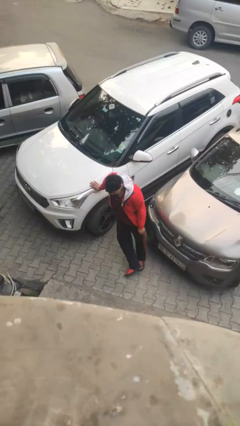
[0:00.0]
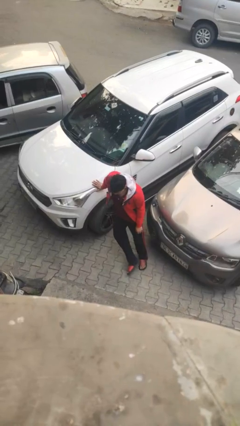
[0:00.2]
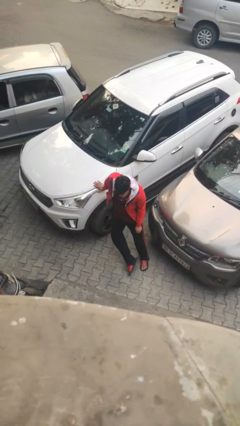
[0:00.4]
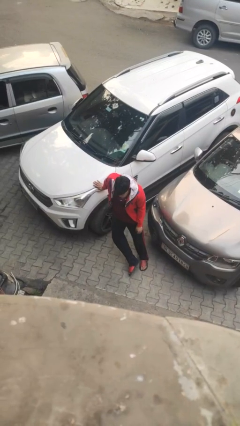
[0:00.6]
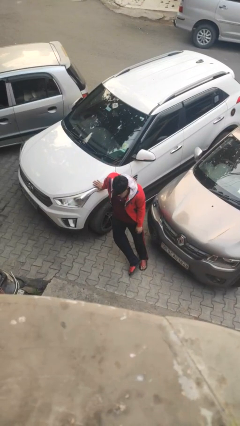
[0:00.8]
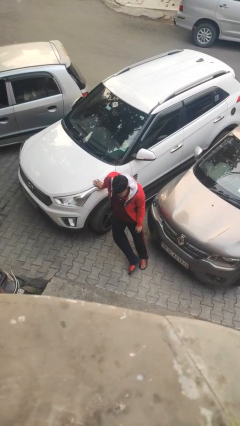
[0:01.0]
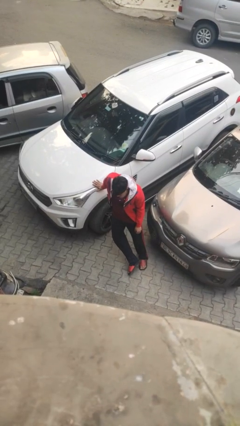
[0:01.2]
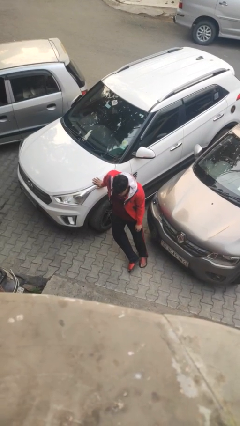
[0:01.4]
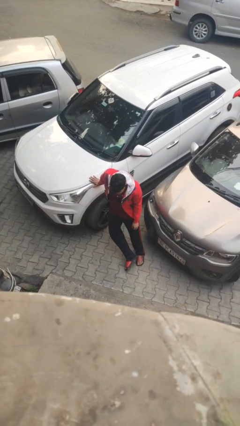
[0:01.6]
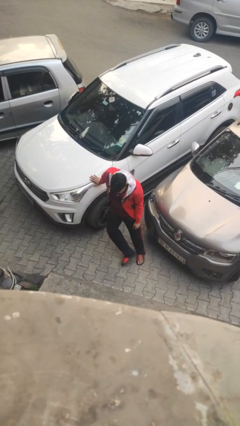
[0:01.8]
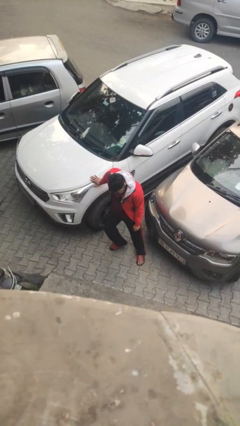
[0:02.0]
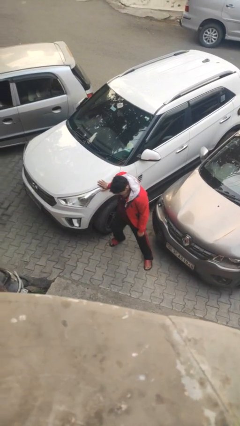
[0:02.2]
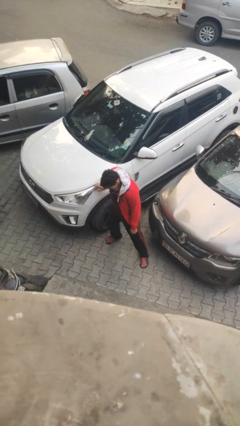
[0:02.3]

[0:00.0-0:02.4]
person leans against car

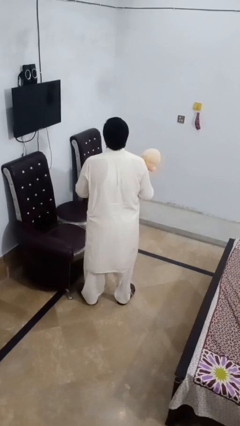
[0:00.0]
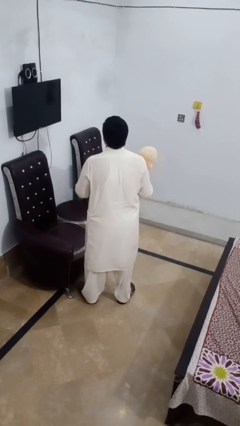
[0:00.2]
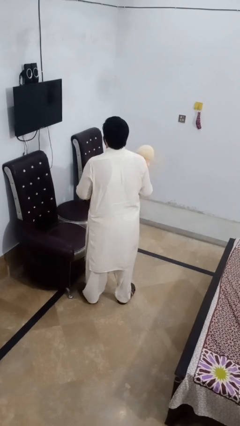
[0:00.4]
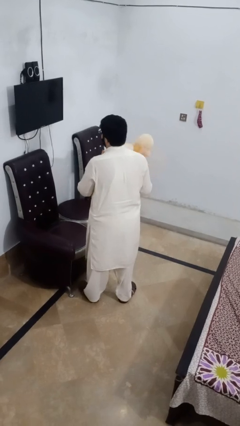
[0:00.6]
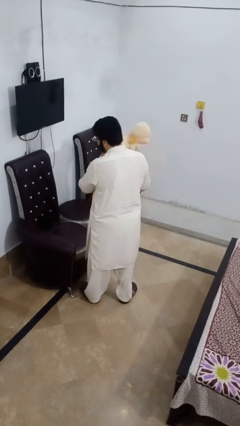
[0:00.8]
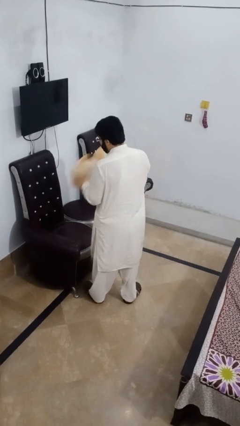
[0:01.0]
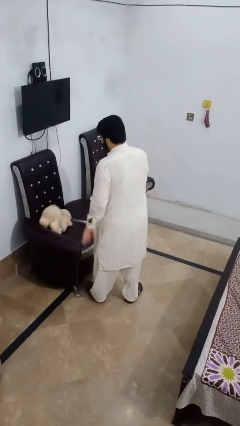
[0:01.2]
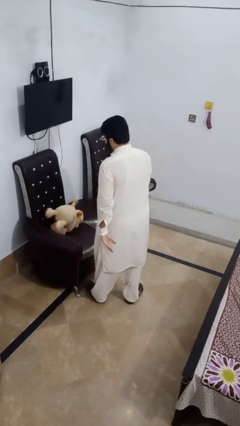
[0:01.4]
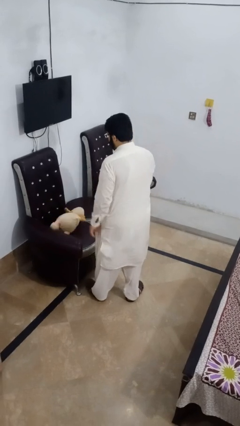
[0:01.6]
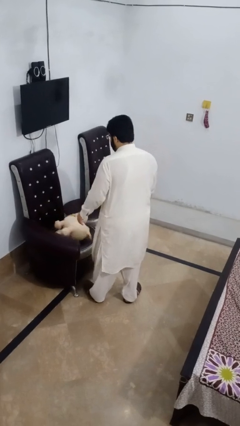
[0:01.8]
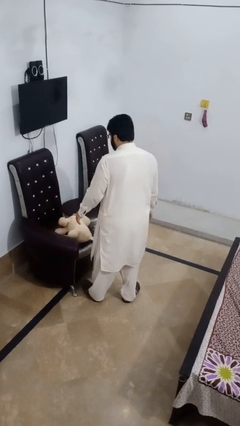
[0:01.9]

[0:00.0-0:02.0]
person puts down object on couch

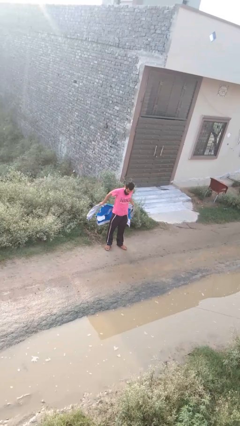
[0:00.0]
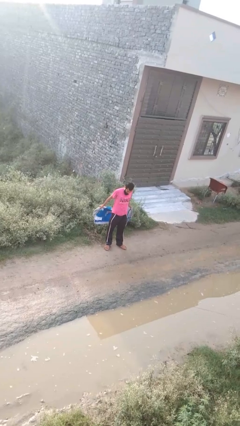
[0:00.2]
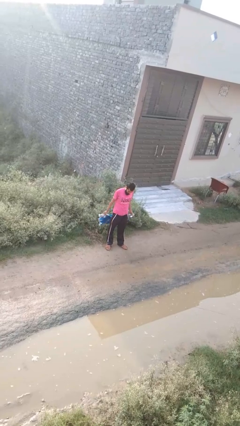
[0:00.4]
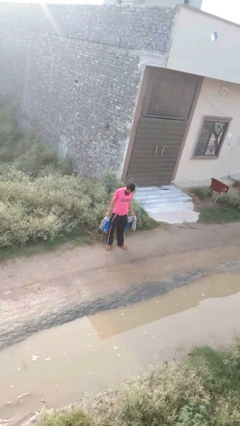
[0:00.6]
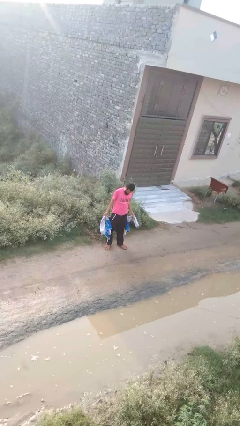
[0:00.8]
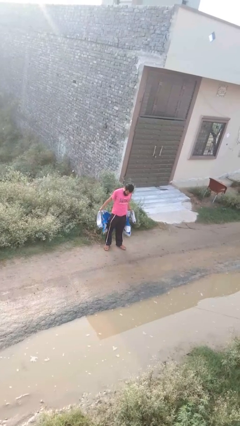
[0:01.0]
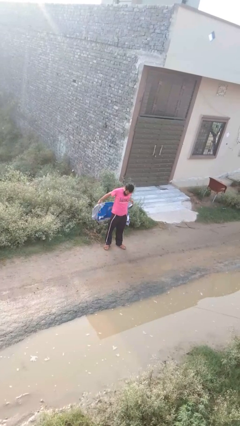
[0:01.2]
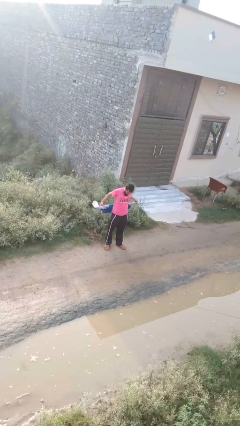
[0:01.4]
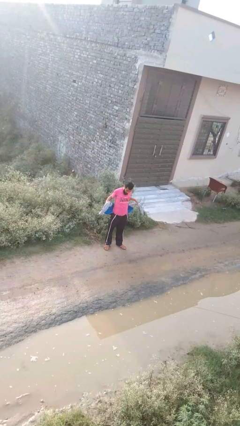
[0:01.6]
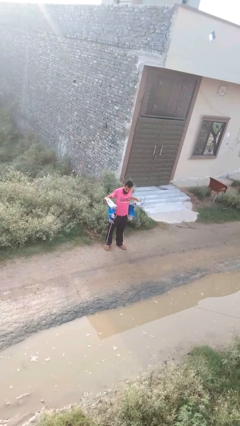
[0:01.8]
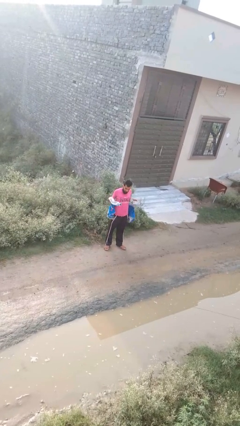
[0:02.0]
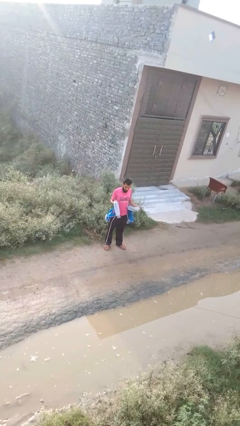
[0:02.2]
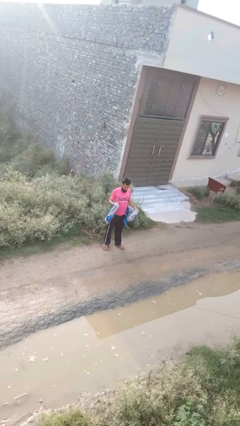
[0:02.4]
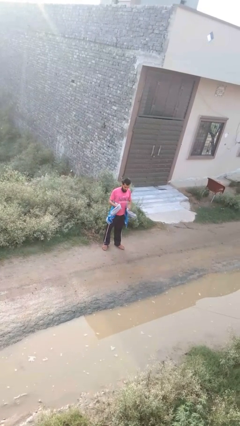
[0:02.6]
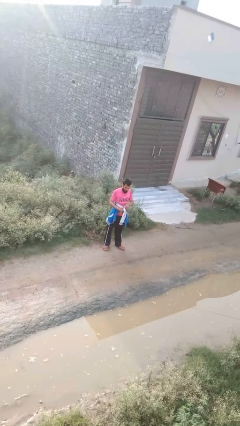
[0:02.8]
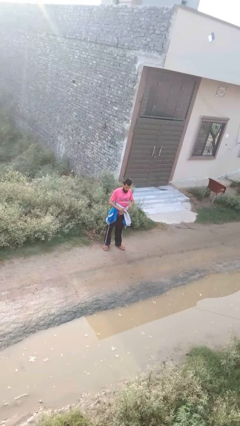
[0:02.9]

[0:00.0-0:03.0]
person ties jacket around waist

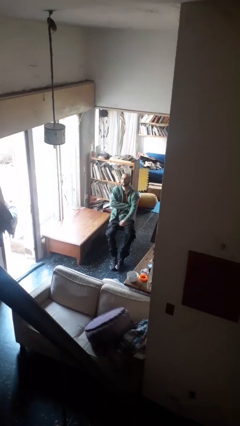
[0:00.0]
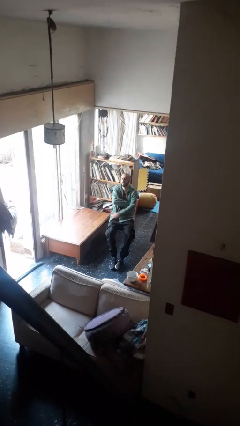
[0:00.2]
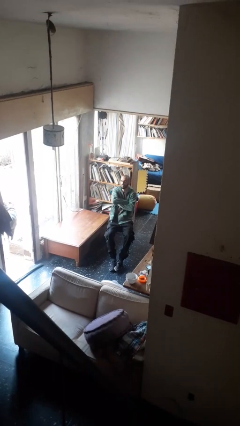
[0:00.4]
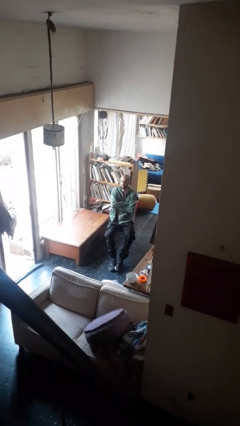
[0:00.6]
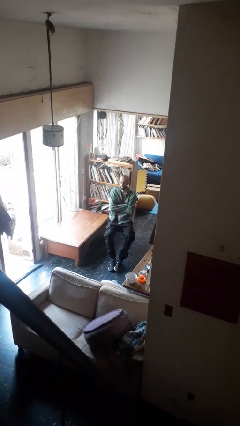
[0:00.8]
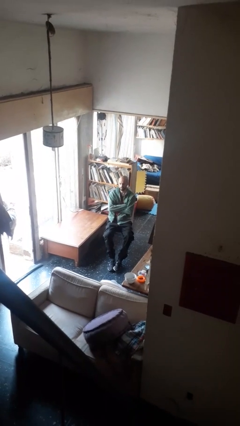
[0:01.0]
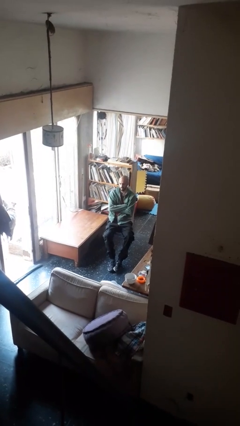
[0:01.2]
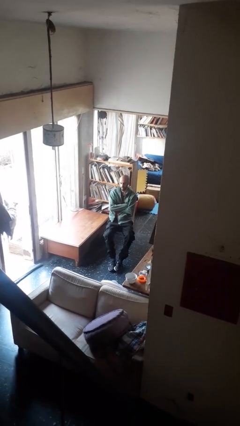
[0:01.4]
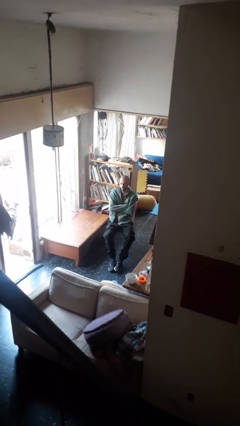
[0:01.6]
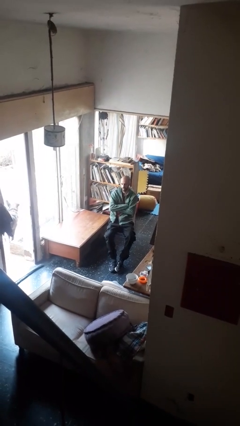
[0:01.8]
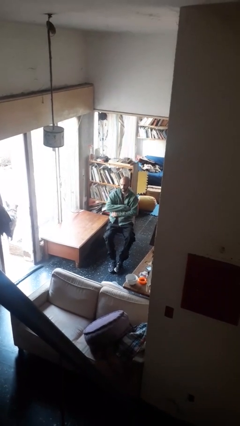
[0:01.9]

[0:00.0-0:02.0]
person crosses arms

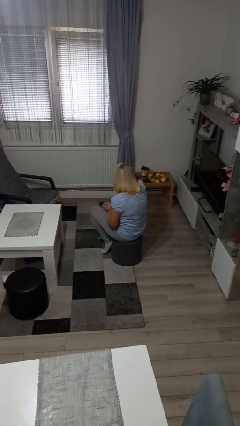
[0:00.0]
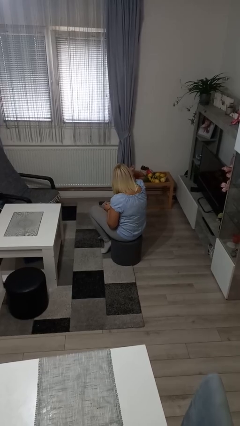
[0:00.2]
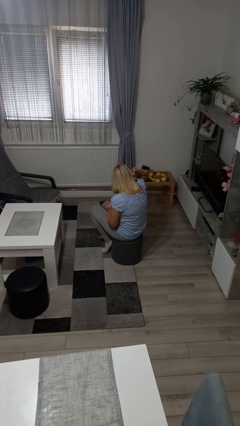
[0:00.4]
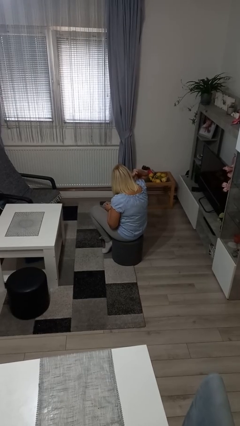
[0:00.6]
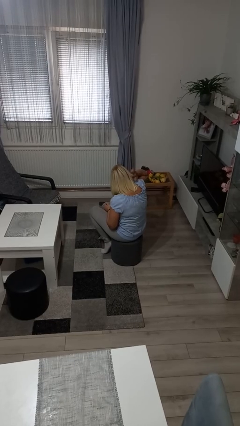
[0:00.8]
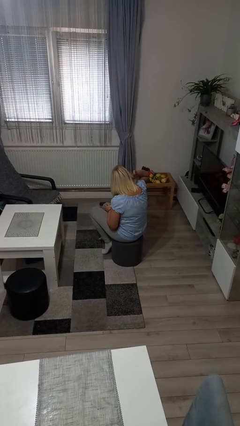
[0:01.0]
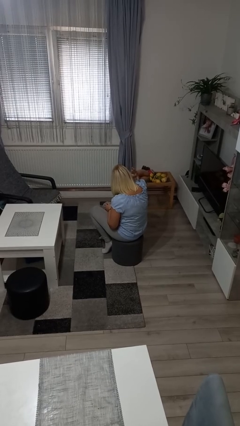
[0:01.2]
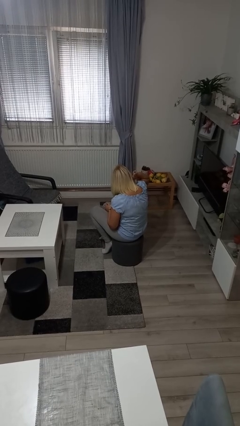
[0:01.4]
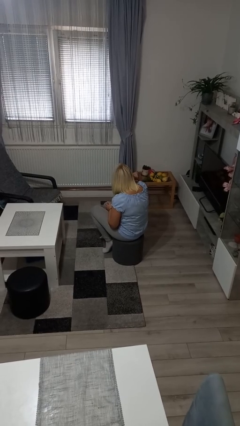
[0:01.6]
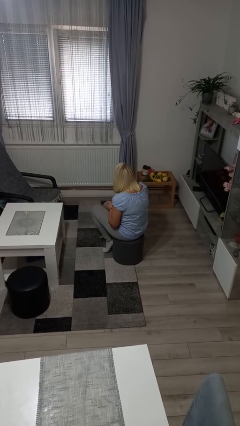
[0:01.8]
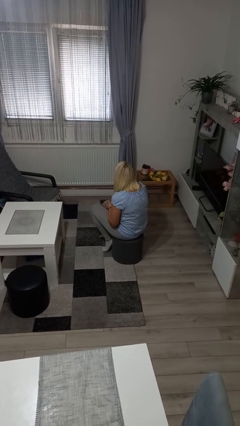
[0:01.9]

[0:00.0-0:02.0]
person touches earlobe

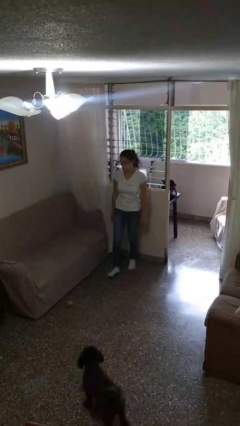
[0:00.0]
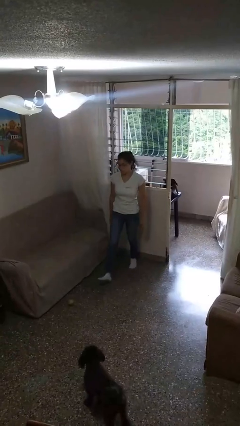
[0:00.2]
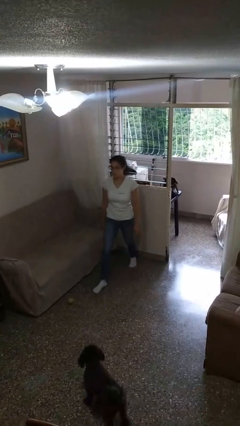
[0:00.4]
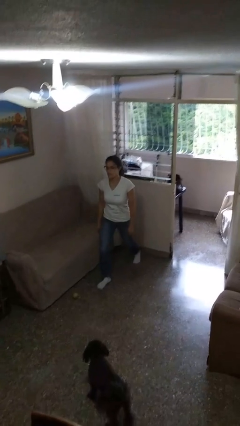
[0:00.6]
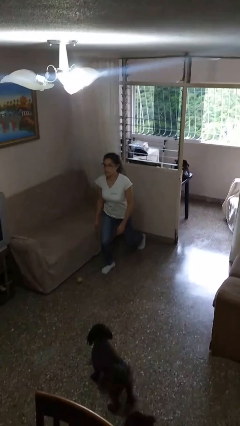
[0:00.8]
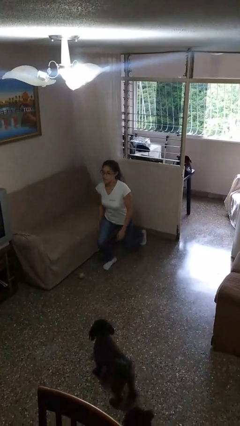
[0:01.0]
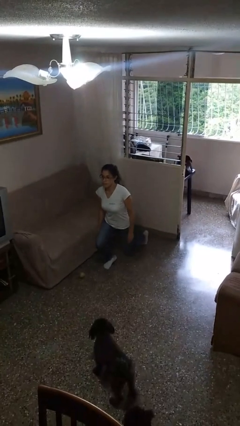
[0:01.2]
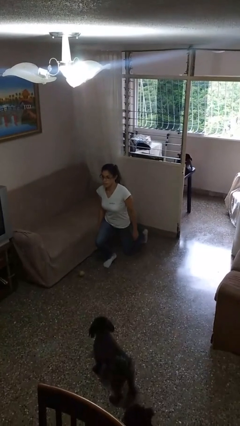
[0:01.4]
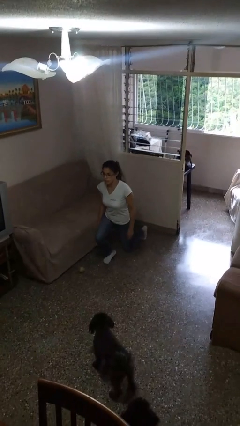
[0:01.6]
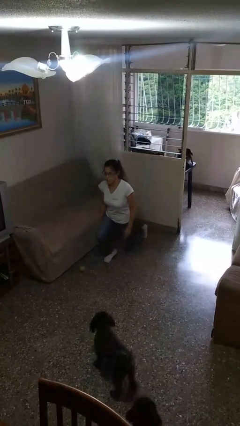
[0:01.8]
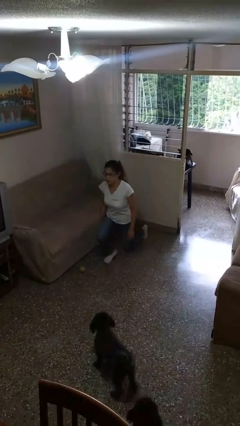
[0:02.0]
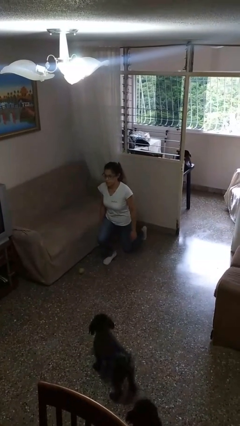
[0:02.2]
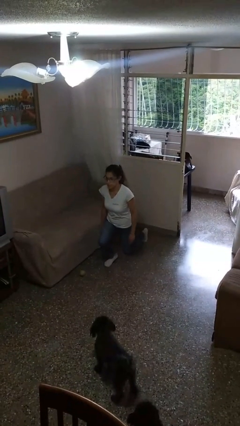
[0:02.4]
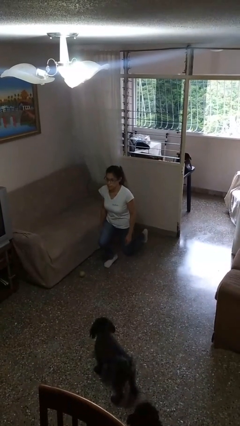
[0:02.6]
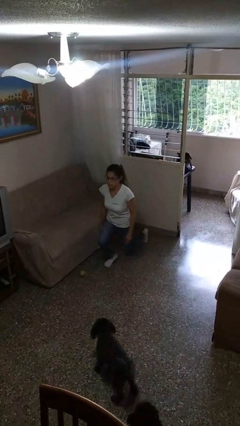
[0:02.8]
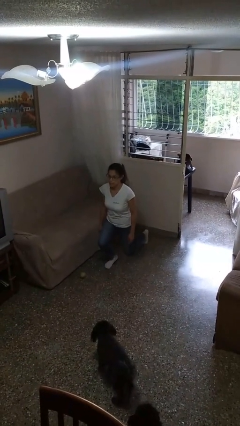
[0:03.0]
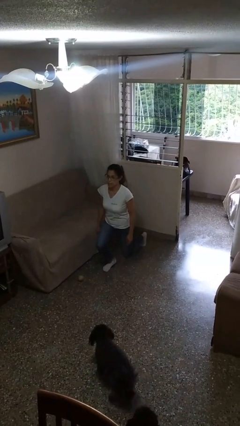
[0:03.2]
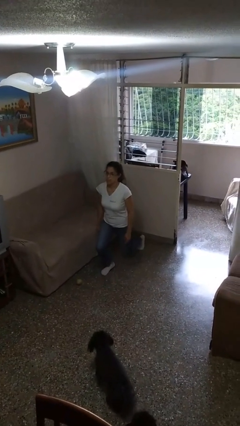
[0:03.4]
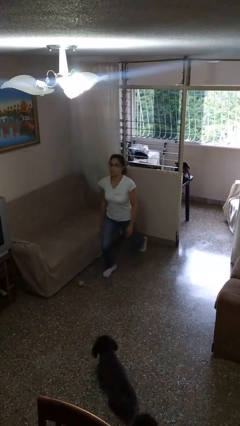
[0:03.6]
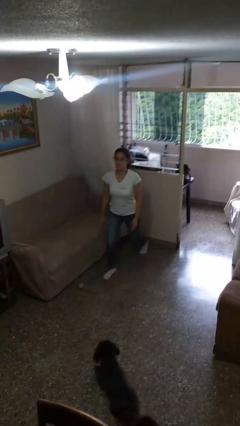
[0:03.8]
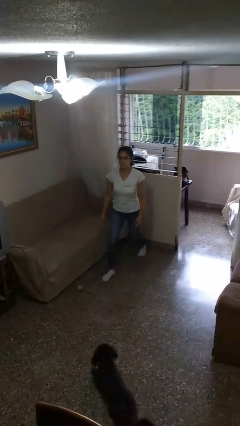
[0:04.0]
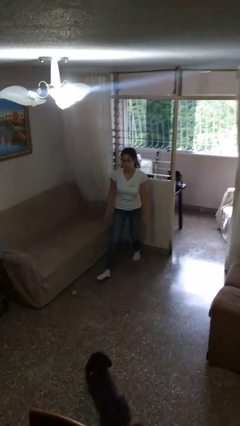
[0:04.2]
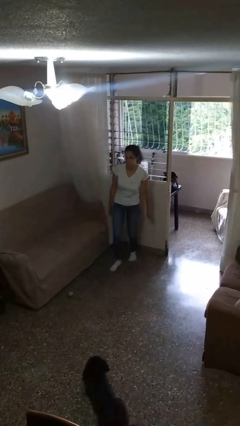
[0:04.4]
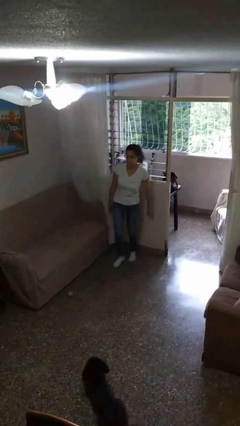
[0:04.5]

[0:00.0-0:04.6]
person exercises with lunges

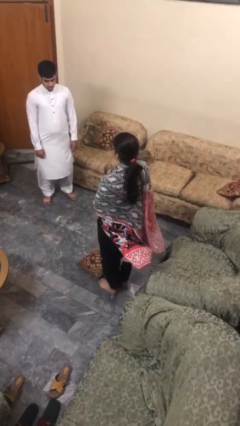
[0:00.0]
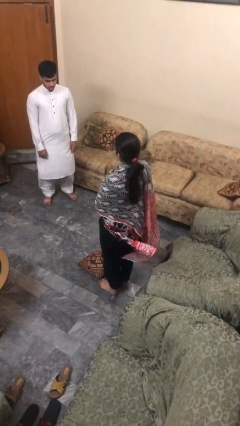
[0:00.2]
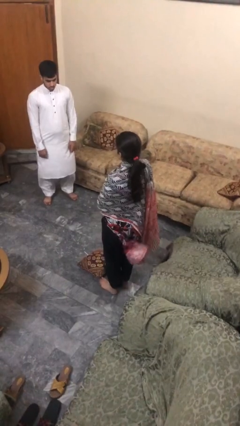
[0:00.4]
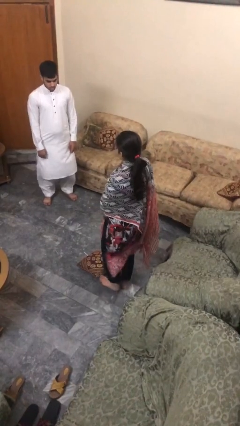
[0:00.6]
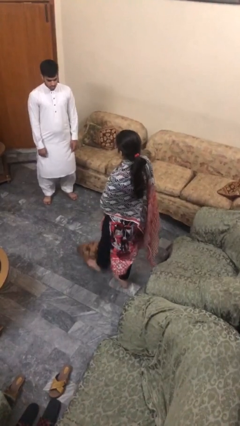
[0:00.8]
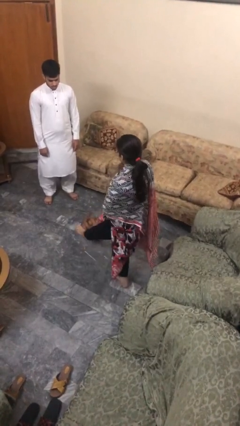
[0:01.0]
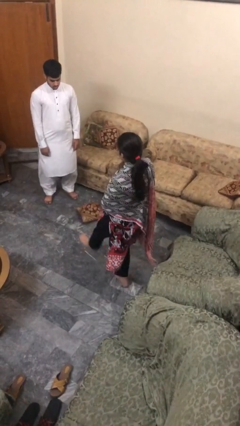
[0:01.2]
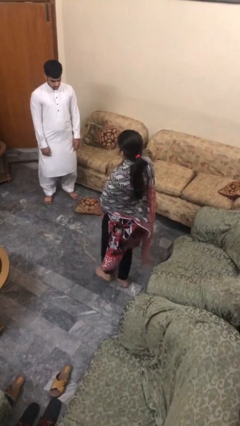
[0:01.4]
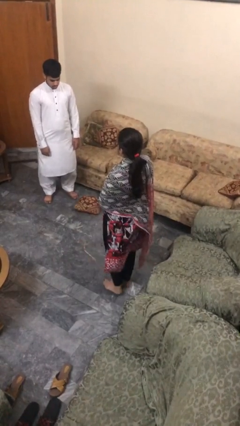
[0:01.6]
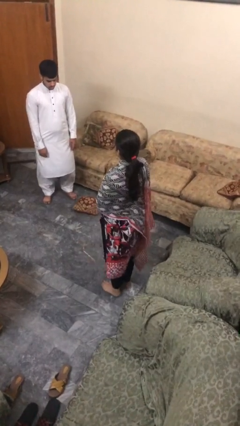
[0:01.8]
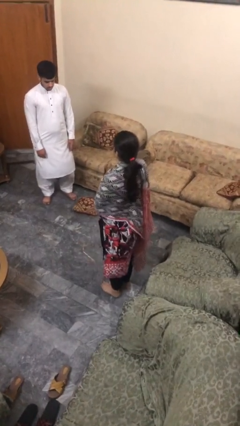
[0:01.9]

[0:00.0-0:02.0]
person kicks object to person
